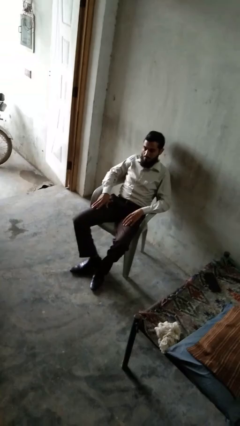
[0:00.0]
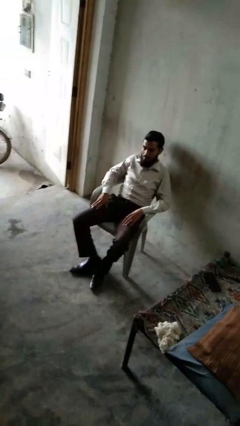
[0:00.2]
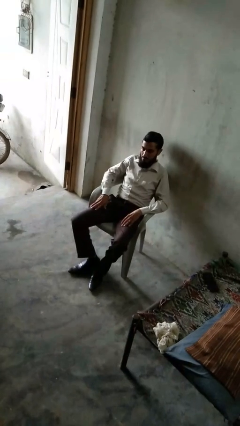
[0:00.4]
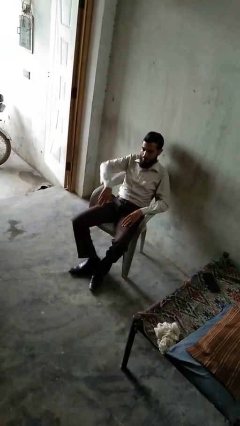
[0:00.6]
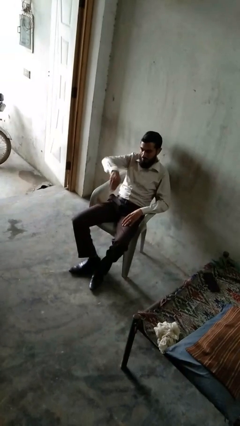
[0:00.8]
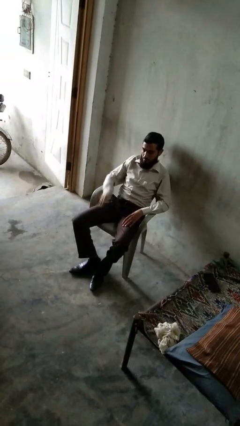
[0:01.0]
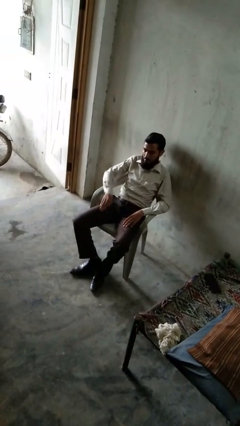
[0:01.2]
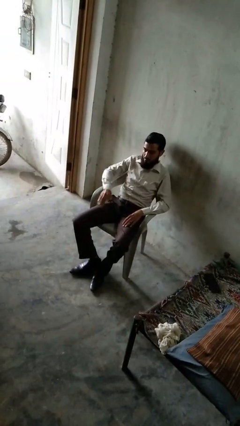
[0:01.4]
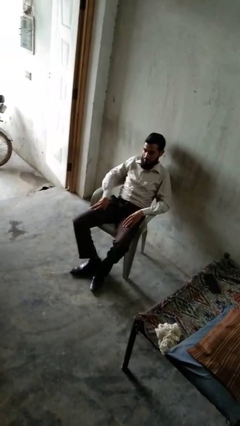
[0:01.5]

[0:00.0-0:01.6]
person slaps hands on thighs

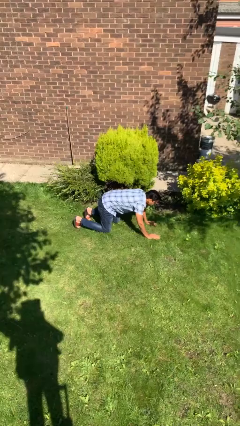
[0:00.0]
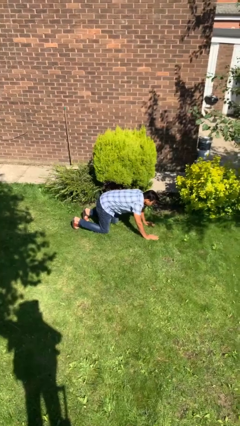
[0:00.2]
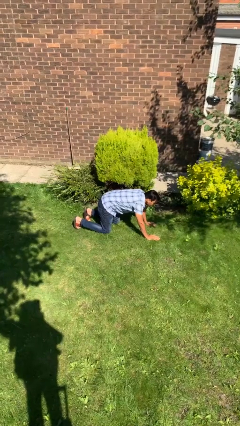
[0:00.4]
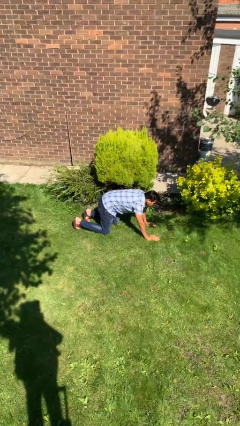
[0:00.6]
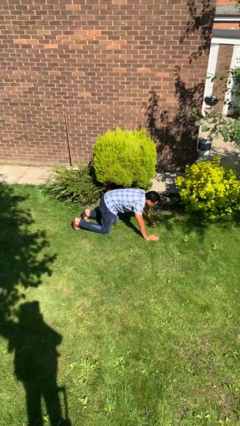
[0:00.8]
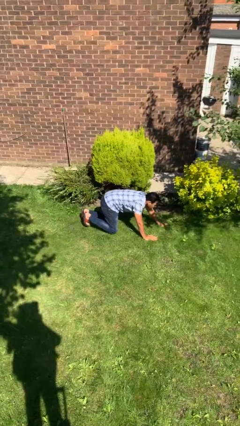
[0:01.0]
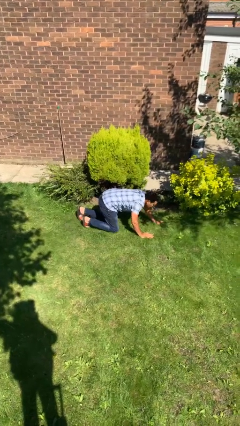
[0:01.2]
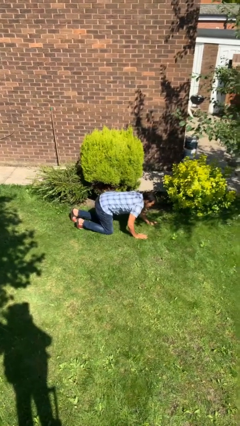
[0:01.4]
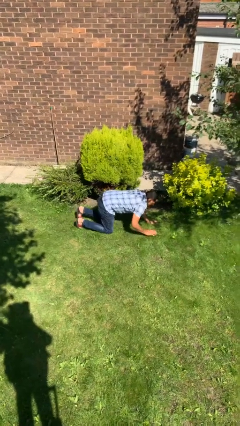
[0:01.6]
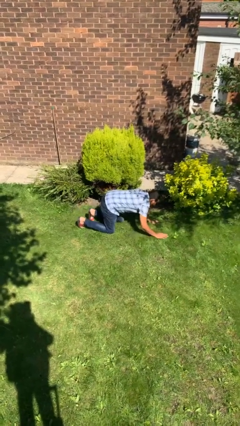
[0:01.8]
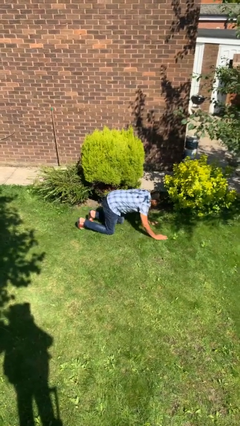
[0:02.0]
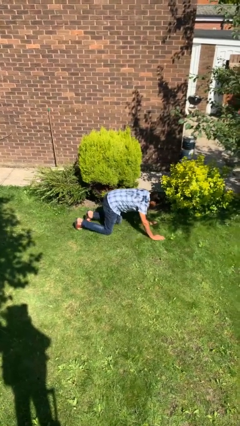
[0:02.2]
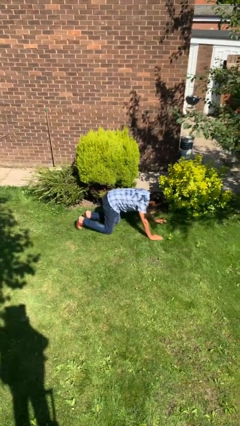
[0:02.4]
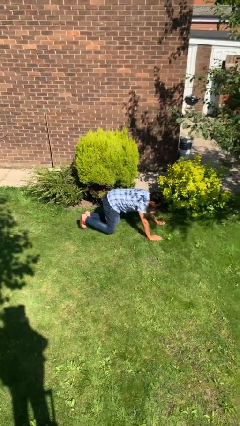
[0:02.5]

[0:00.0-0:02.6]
person crawls

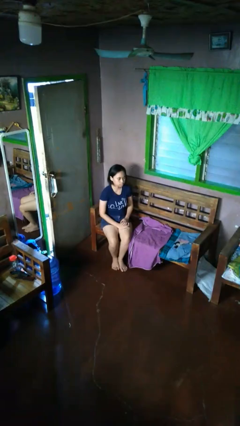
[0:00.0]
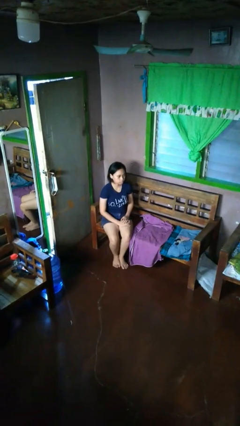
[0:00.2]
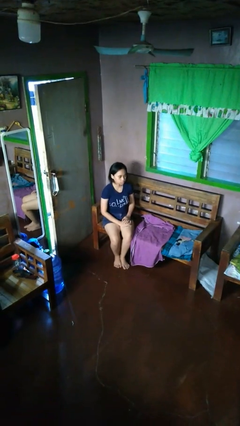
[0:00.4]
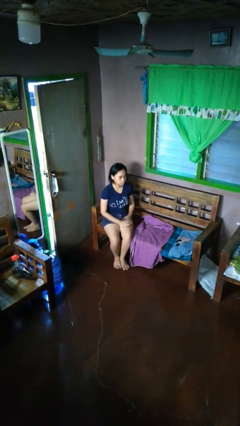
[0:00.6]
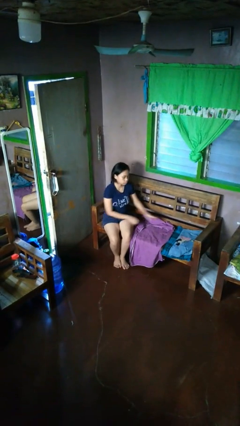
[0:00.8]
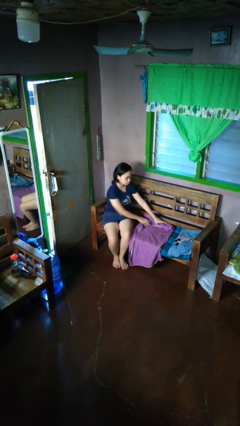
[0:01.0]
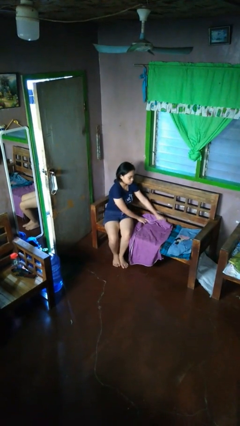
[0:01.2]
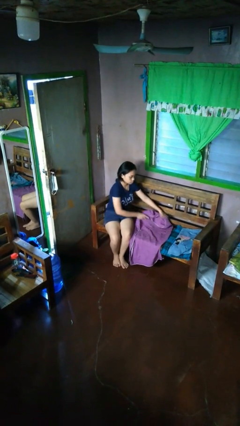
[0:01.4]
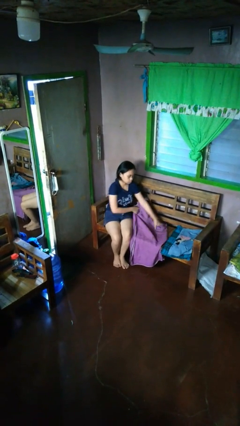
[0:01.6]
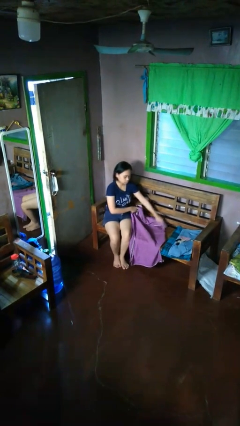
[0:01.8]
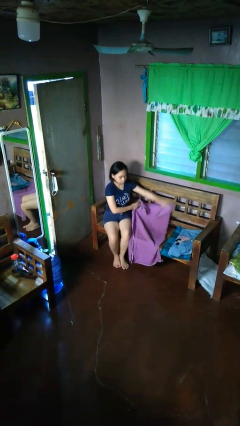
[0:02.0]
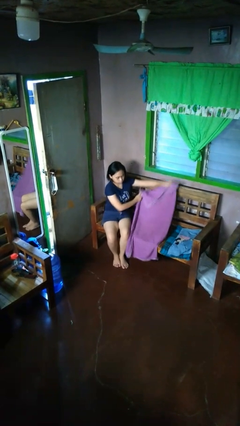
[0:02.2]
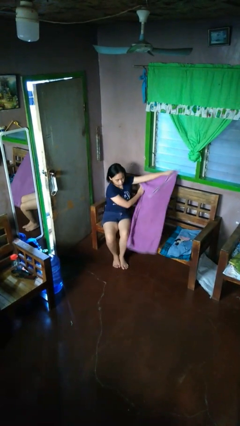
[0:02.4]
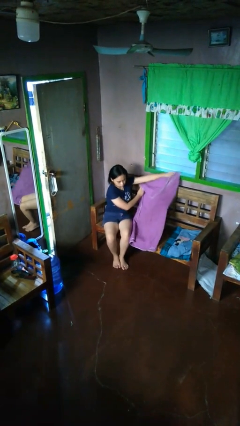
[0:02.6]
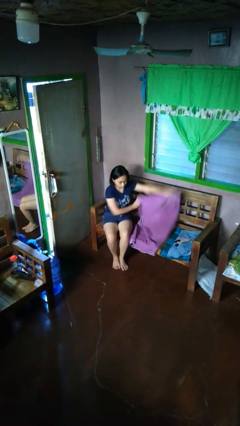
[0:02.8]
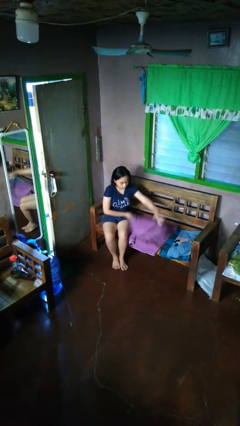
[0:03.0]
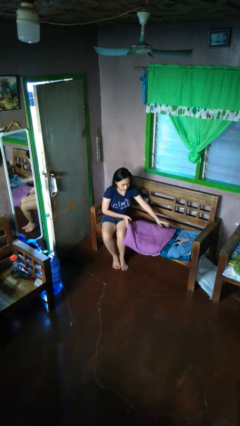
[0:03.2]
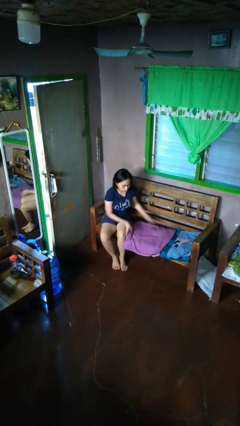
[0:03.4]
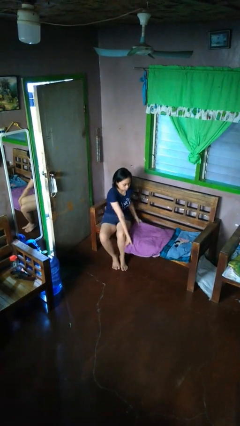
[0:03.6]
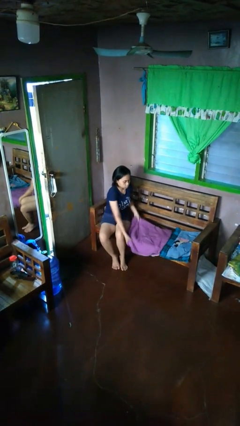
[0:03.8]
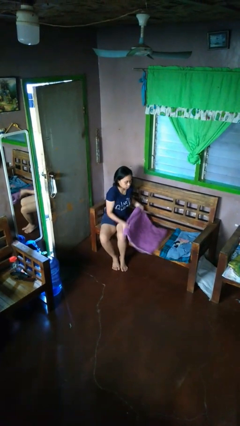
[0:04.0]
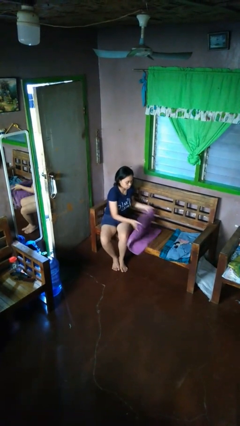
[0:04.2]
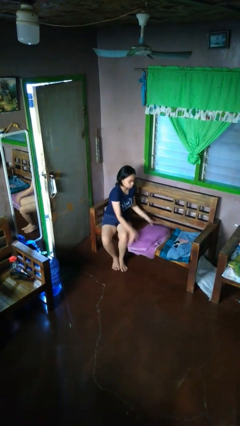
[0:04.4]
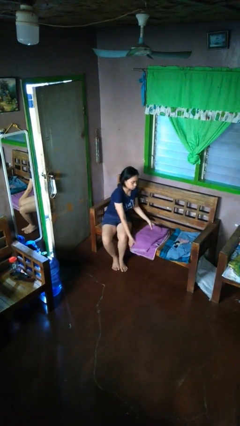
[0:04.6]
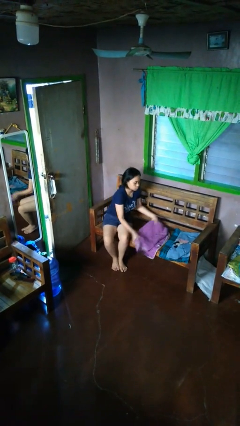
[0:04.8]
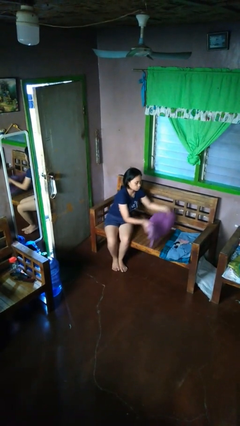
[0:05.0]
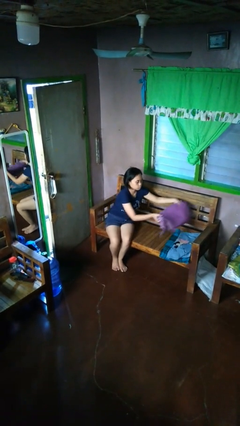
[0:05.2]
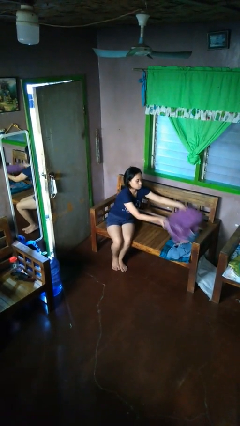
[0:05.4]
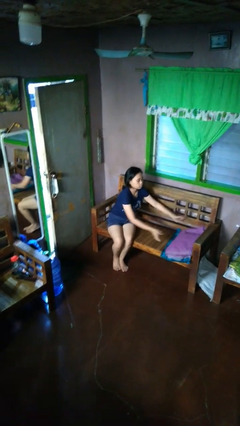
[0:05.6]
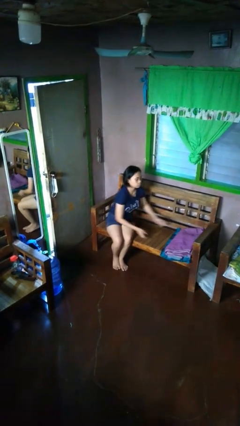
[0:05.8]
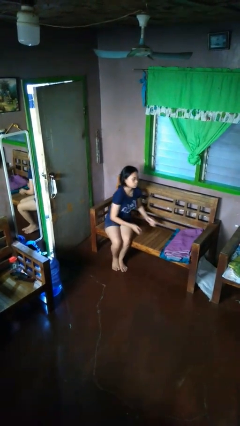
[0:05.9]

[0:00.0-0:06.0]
person folds blanket

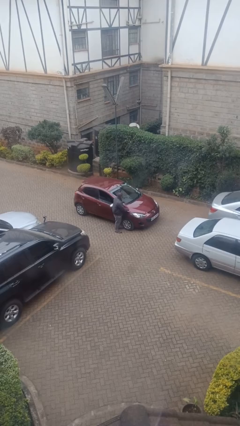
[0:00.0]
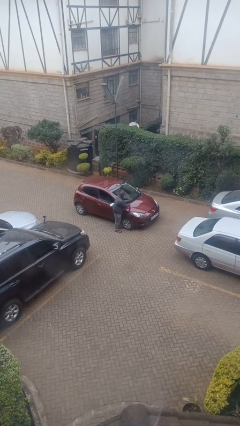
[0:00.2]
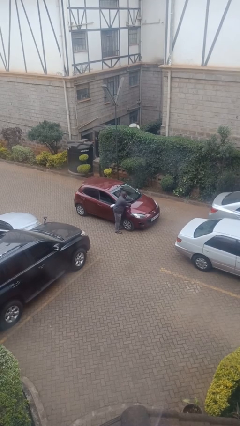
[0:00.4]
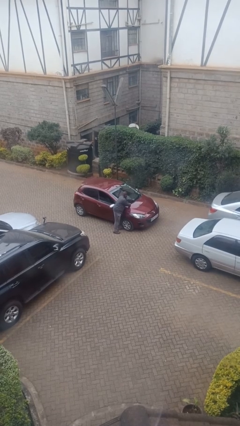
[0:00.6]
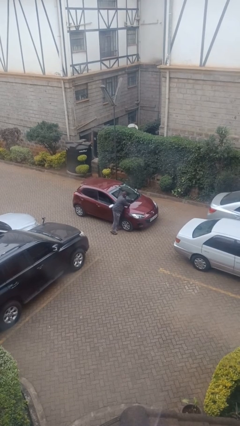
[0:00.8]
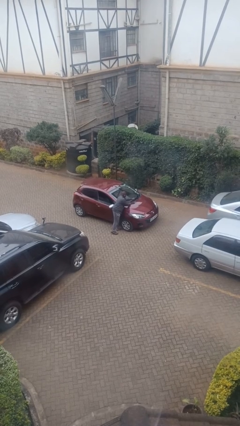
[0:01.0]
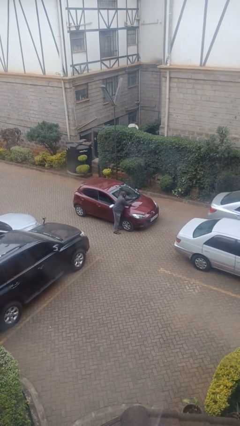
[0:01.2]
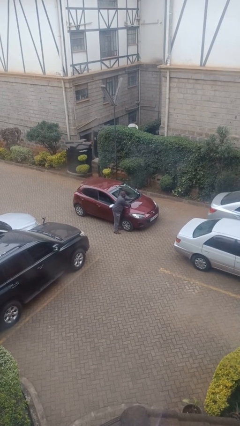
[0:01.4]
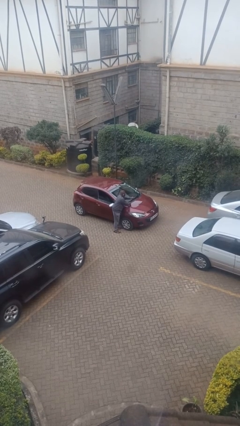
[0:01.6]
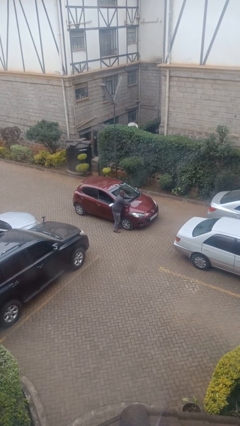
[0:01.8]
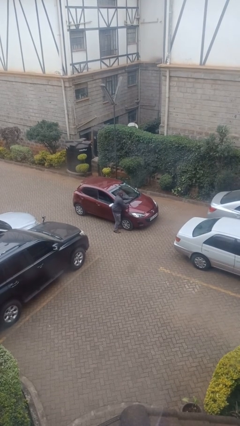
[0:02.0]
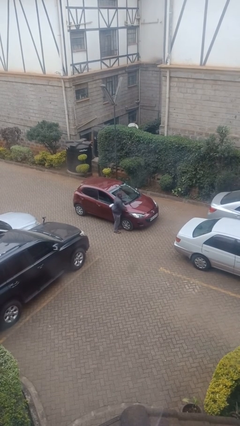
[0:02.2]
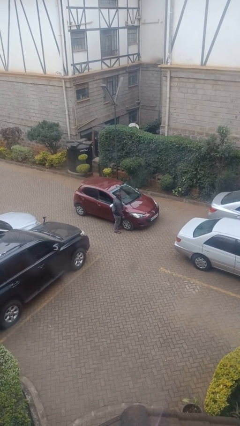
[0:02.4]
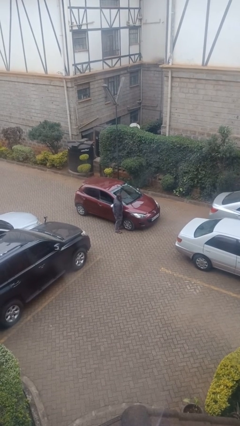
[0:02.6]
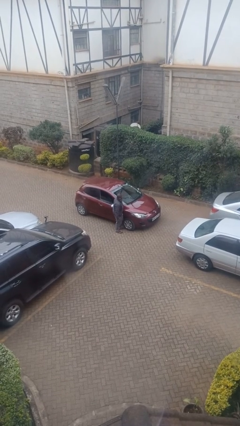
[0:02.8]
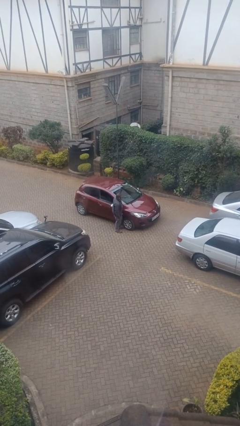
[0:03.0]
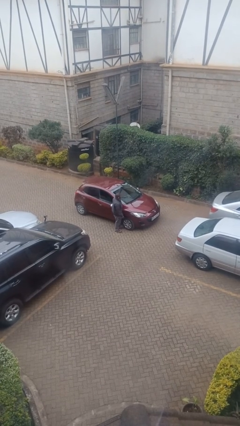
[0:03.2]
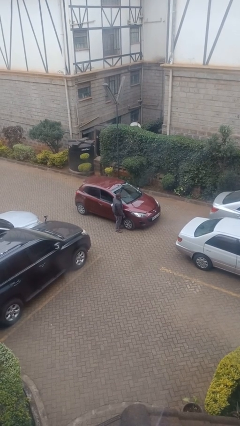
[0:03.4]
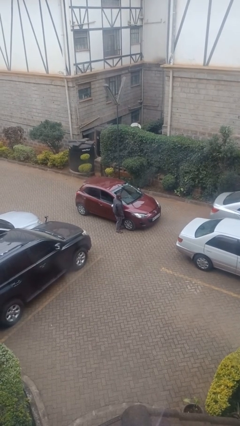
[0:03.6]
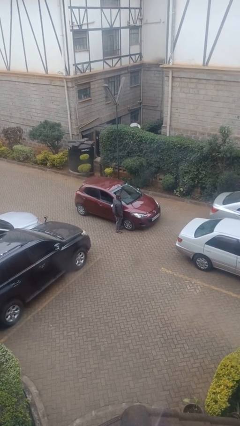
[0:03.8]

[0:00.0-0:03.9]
person flips up car wipers

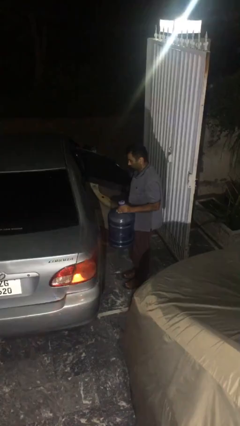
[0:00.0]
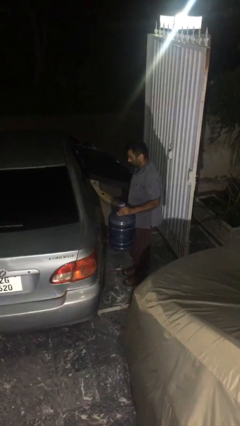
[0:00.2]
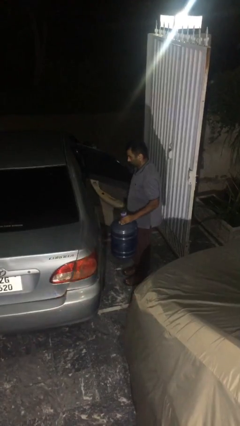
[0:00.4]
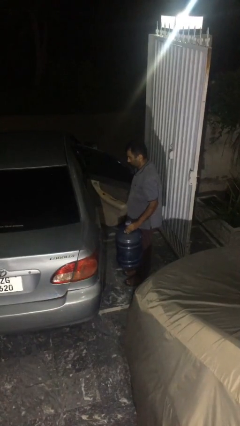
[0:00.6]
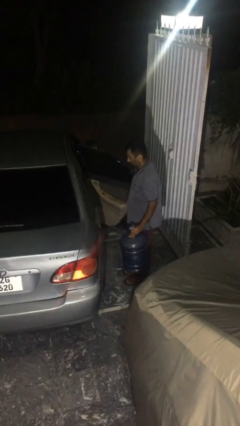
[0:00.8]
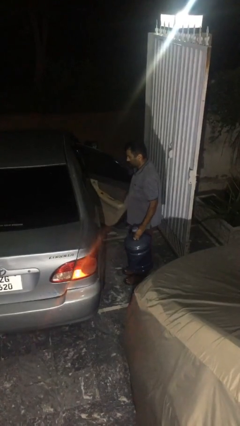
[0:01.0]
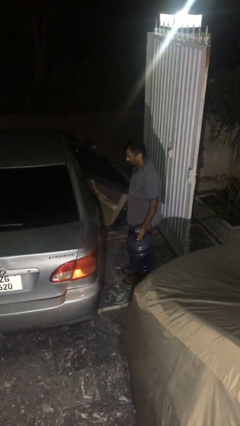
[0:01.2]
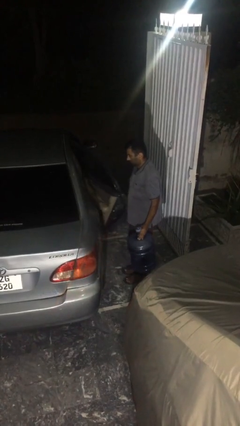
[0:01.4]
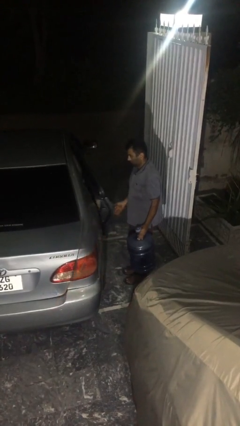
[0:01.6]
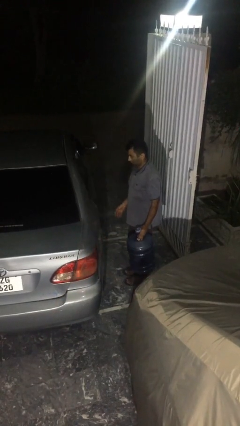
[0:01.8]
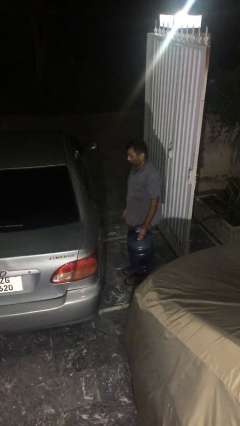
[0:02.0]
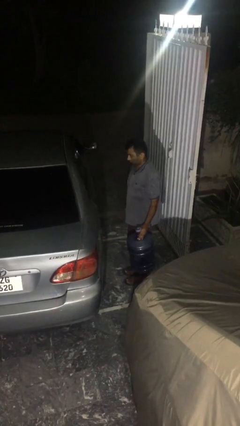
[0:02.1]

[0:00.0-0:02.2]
person closes car door

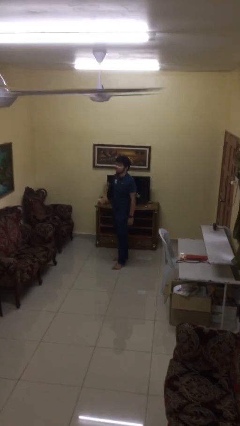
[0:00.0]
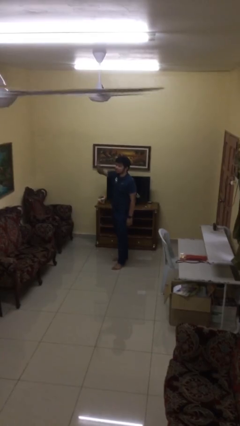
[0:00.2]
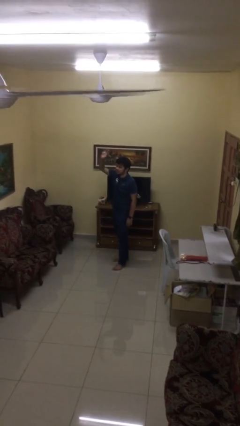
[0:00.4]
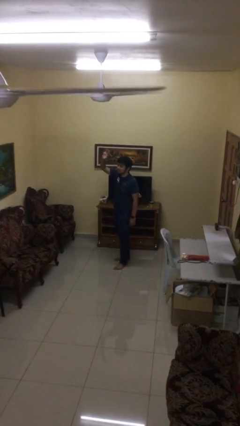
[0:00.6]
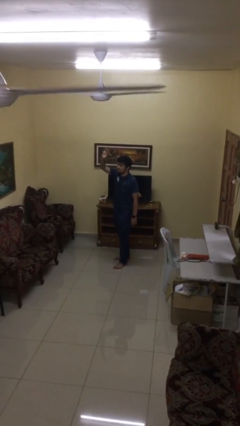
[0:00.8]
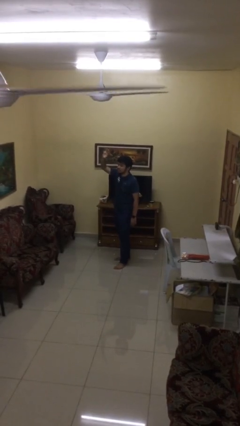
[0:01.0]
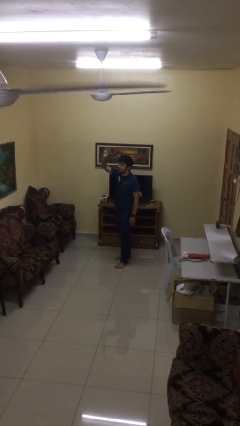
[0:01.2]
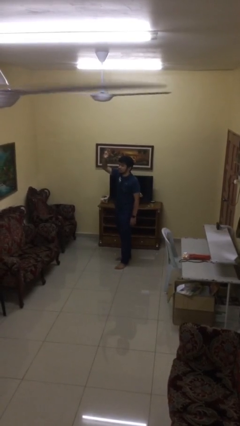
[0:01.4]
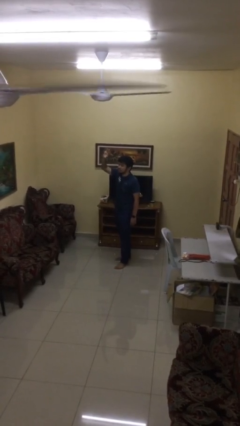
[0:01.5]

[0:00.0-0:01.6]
person gestures swipe up
